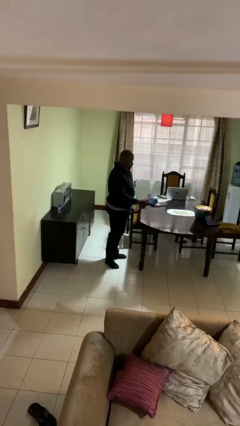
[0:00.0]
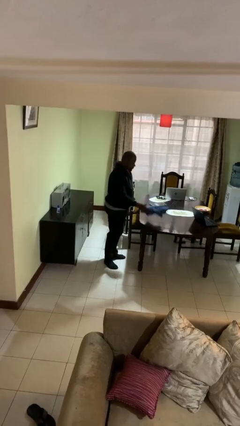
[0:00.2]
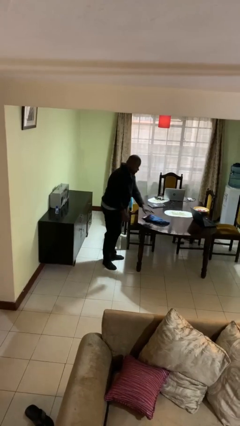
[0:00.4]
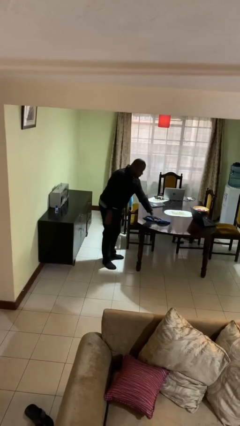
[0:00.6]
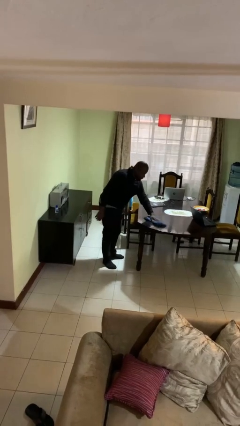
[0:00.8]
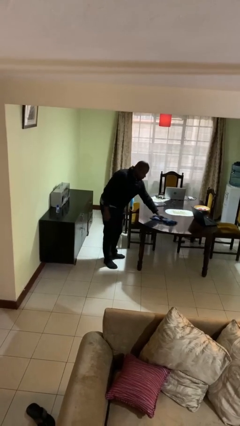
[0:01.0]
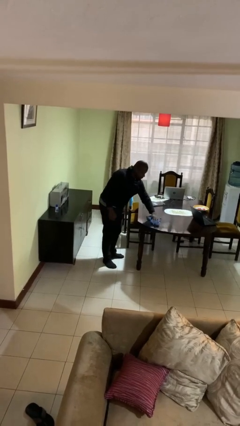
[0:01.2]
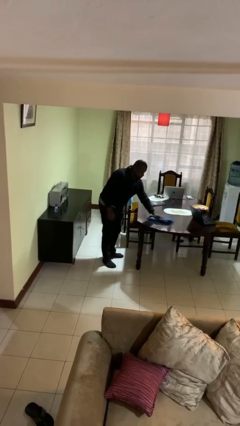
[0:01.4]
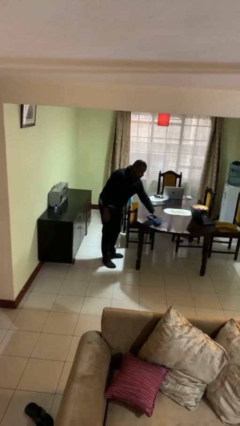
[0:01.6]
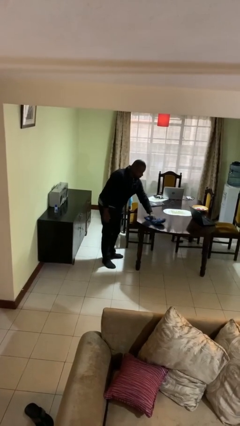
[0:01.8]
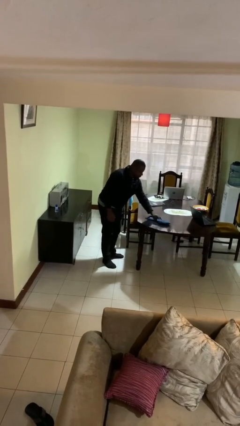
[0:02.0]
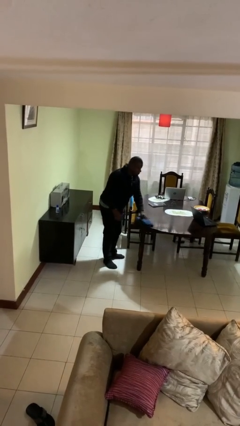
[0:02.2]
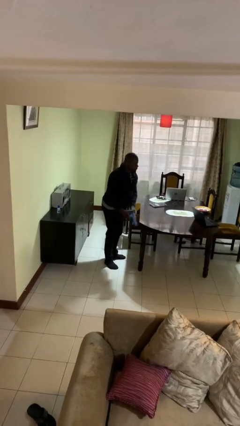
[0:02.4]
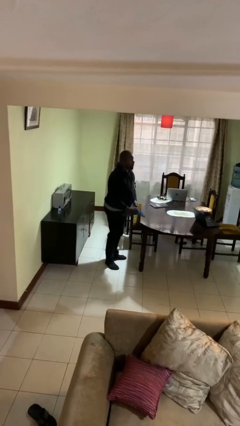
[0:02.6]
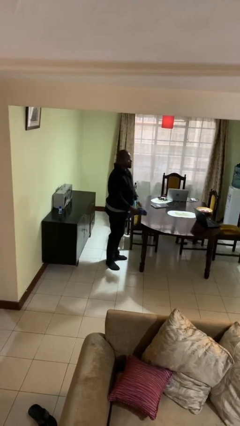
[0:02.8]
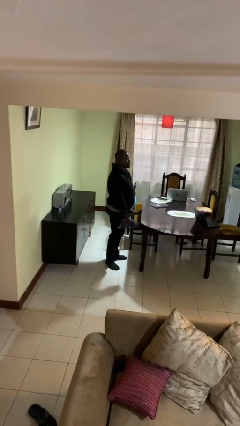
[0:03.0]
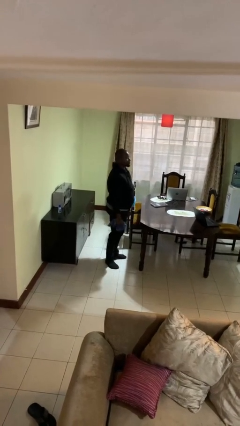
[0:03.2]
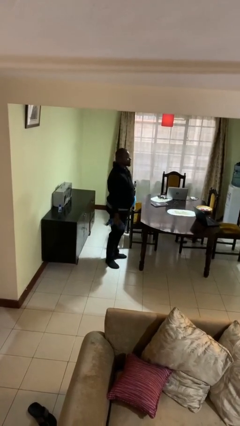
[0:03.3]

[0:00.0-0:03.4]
person cleans table with rag

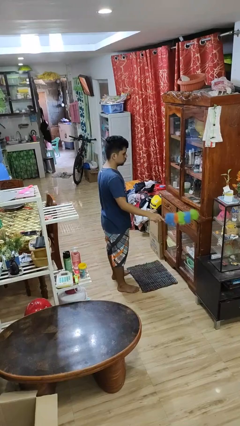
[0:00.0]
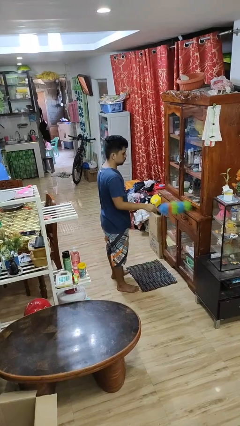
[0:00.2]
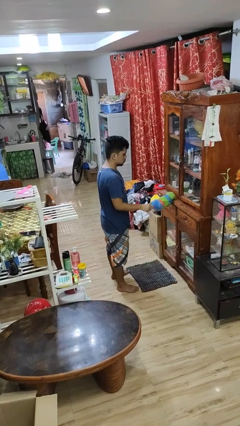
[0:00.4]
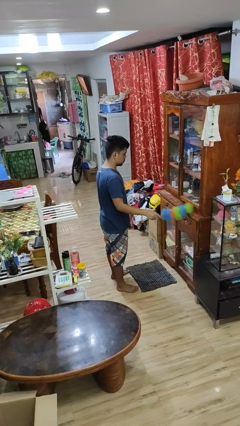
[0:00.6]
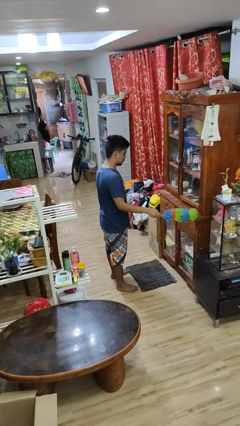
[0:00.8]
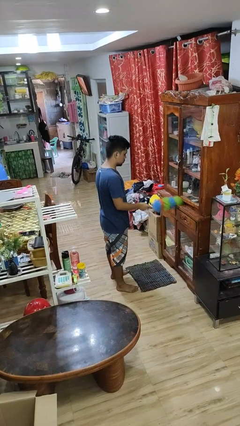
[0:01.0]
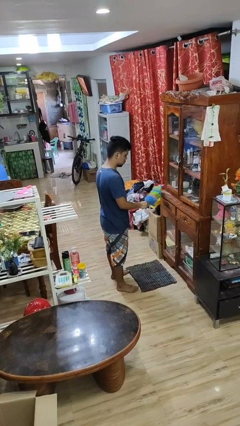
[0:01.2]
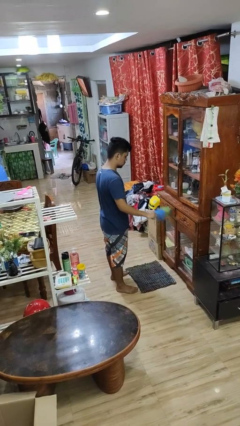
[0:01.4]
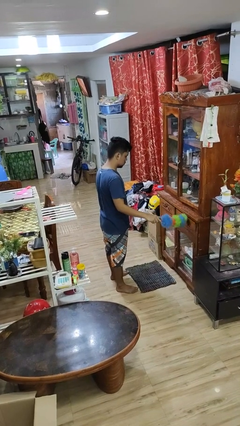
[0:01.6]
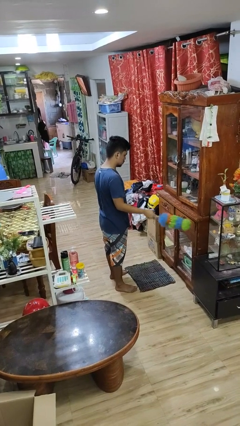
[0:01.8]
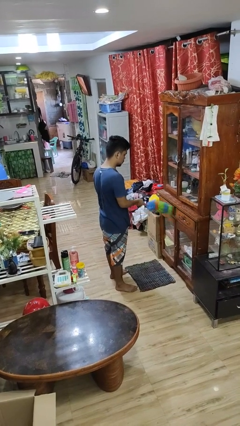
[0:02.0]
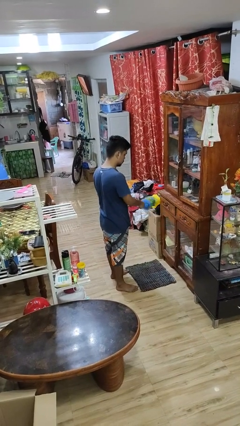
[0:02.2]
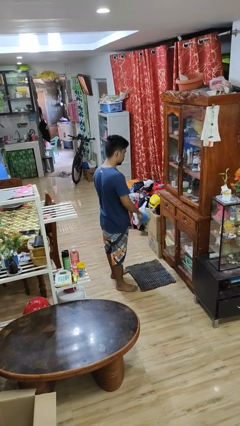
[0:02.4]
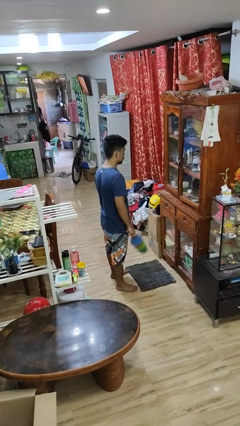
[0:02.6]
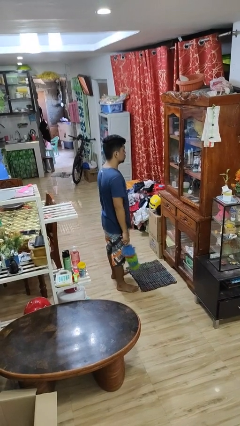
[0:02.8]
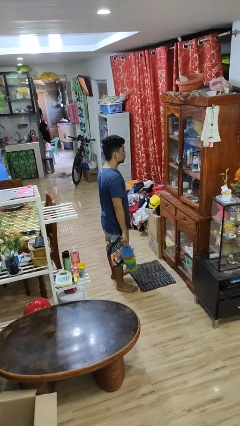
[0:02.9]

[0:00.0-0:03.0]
person dusts furniture

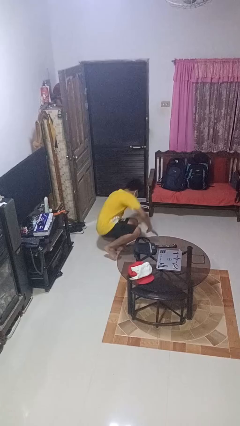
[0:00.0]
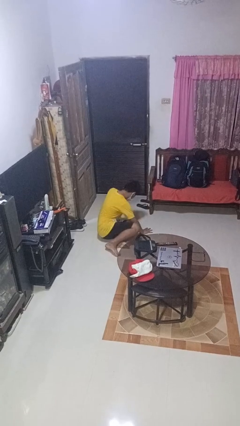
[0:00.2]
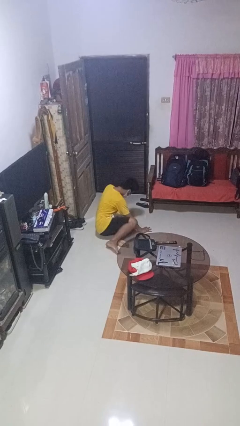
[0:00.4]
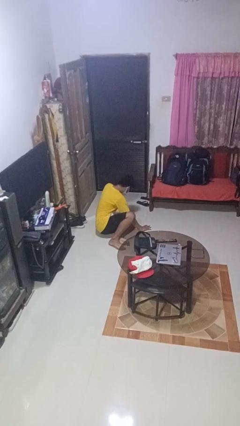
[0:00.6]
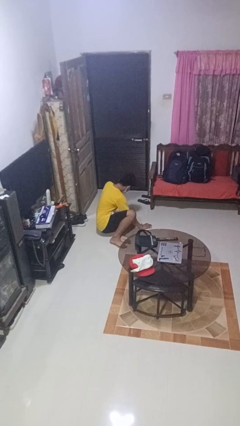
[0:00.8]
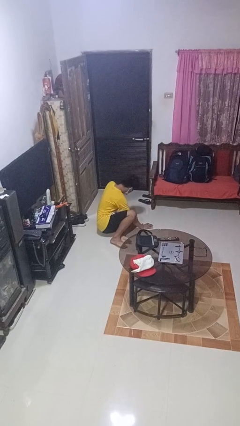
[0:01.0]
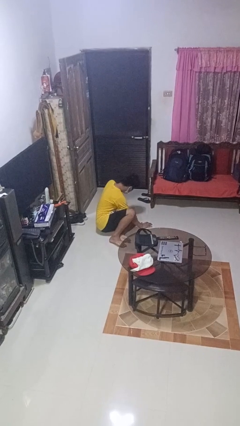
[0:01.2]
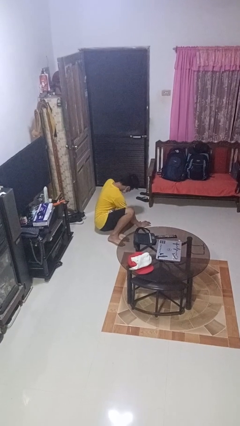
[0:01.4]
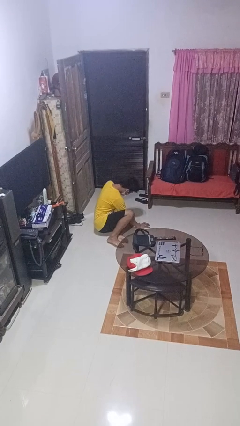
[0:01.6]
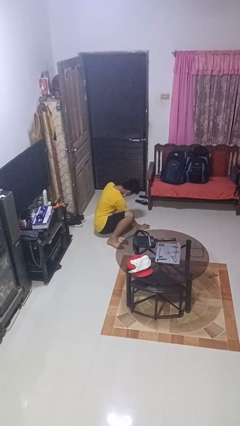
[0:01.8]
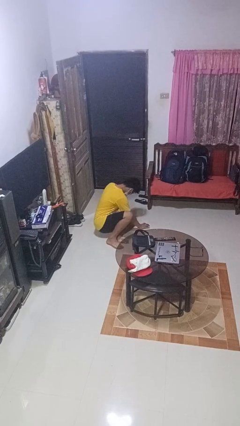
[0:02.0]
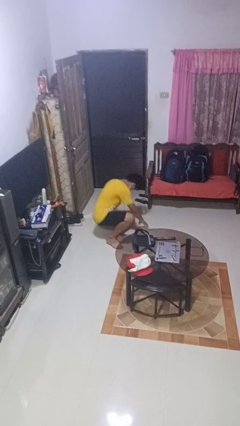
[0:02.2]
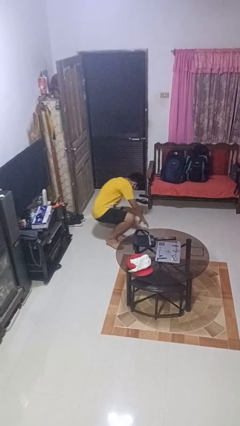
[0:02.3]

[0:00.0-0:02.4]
person lies down on floor

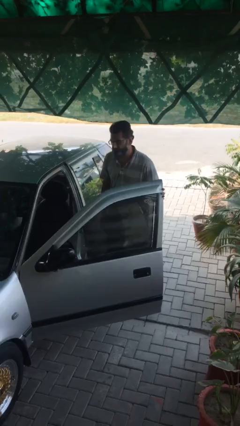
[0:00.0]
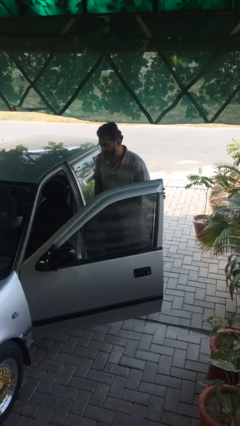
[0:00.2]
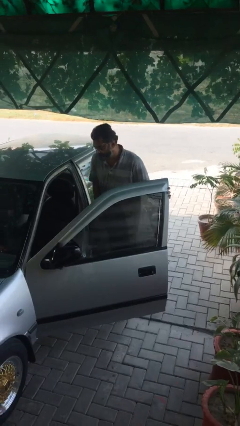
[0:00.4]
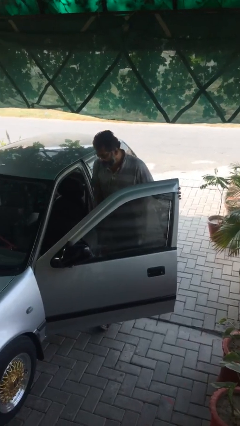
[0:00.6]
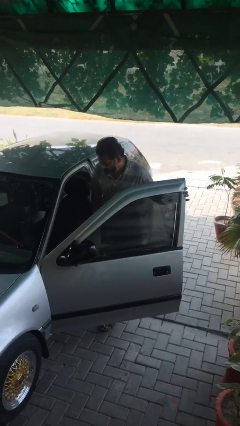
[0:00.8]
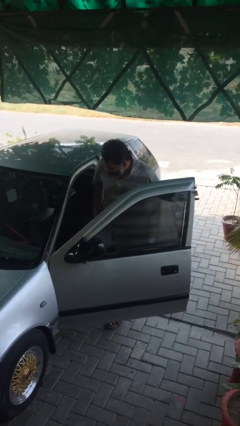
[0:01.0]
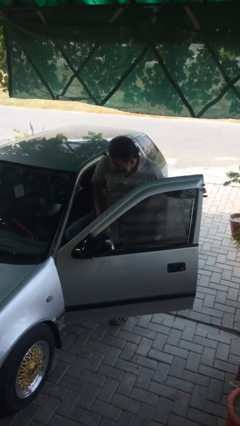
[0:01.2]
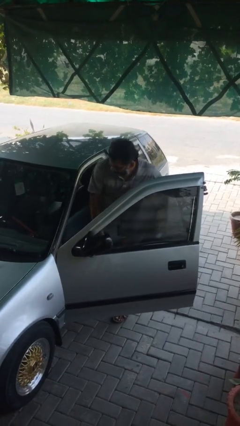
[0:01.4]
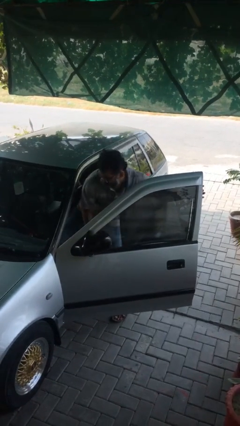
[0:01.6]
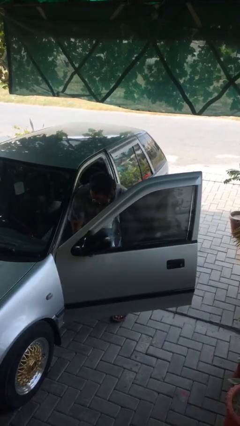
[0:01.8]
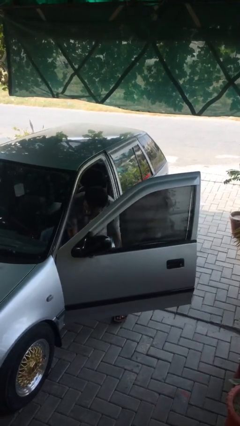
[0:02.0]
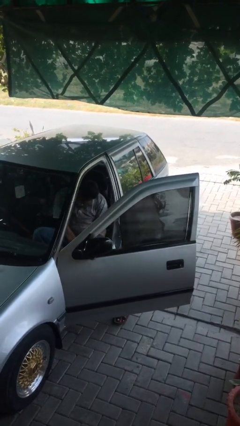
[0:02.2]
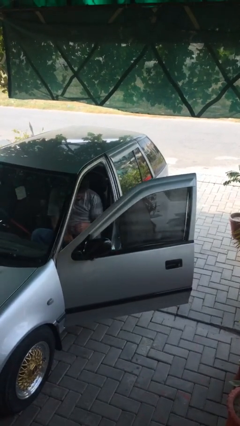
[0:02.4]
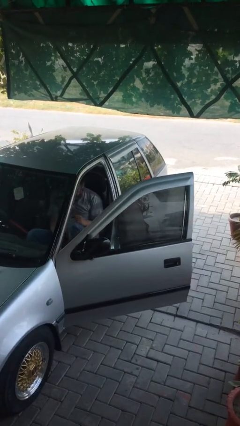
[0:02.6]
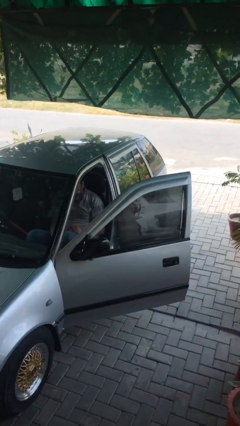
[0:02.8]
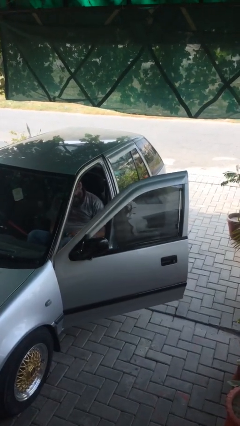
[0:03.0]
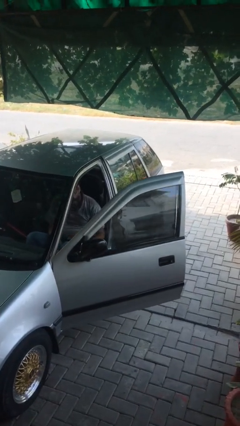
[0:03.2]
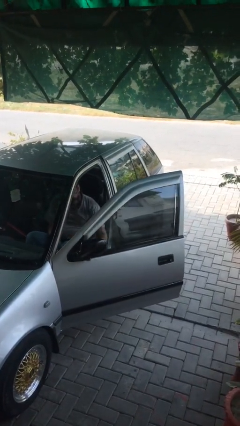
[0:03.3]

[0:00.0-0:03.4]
person enters car

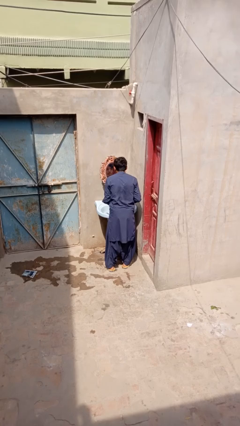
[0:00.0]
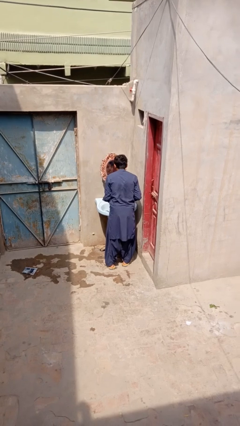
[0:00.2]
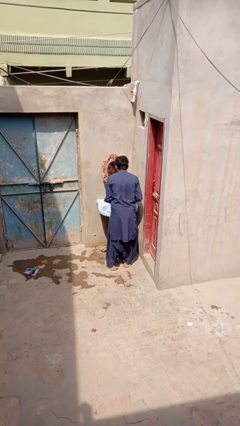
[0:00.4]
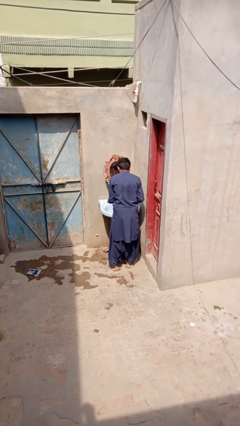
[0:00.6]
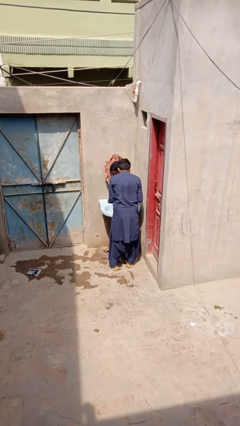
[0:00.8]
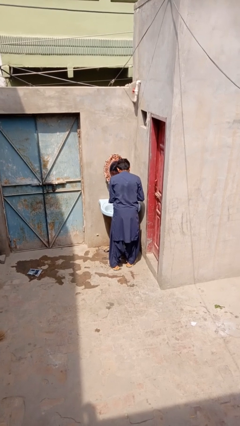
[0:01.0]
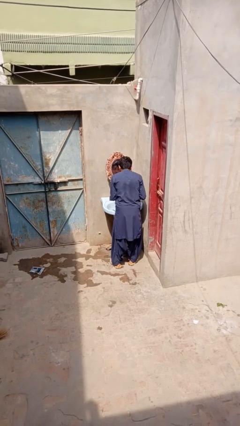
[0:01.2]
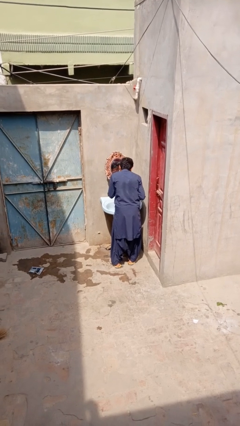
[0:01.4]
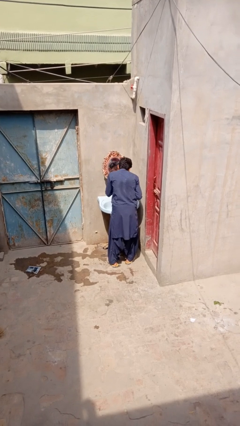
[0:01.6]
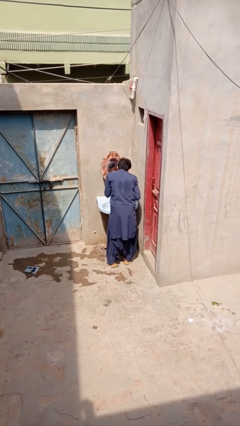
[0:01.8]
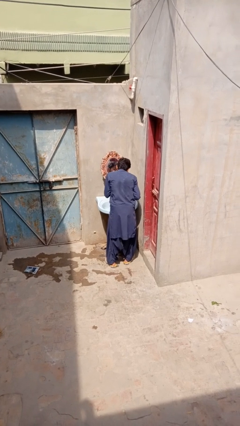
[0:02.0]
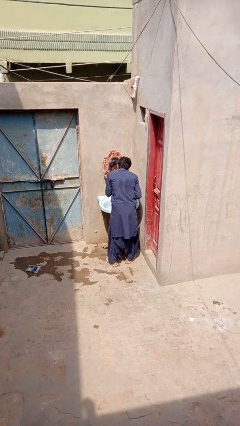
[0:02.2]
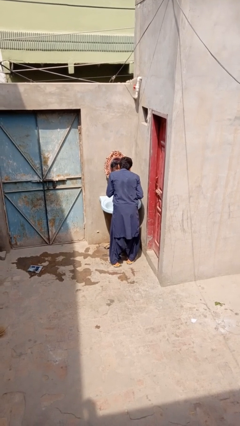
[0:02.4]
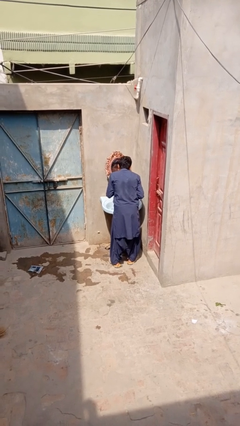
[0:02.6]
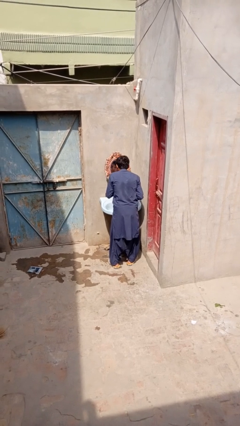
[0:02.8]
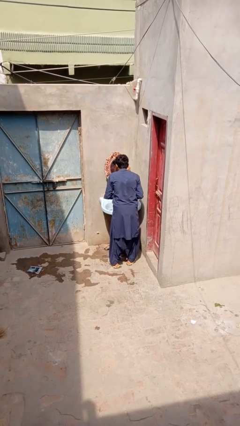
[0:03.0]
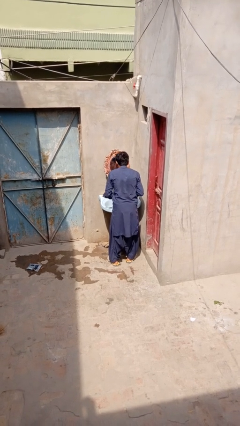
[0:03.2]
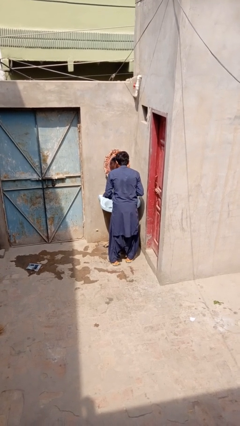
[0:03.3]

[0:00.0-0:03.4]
person applies shaving cream

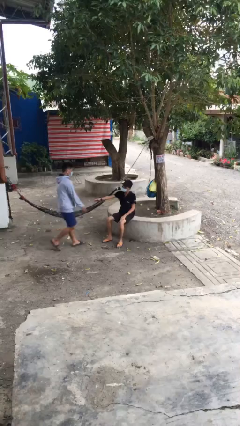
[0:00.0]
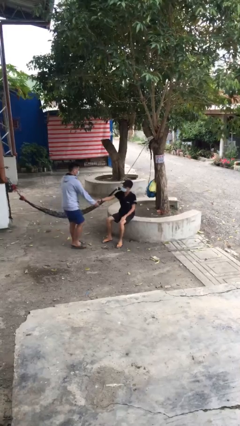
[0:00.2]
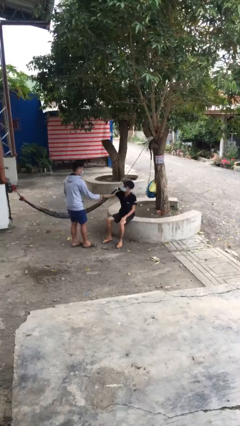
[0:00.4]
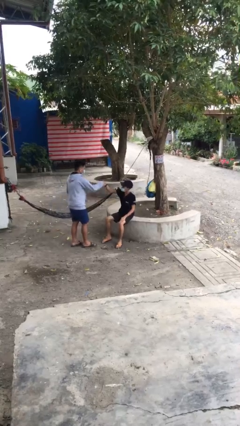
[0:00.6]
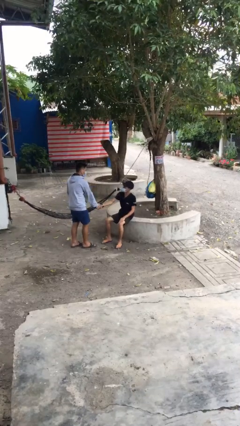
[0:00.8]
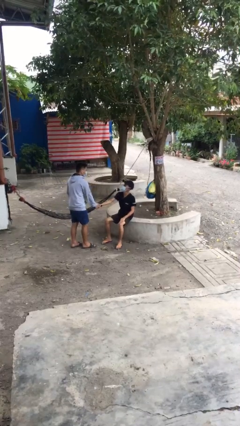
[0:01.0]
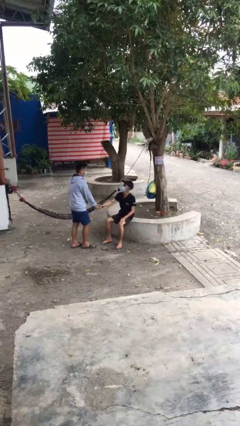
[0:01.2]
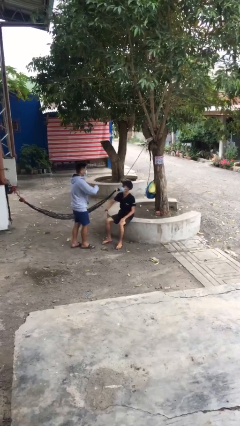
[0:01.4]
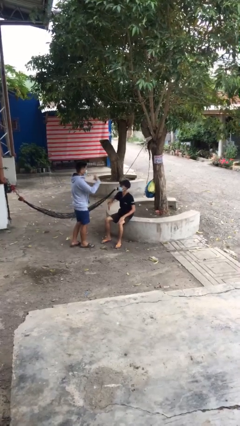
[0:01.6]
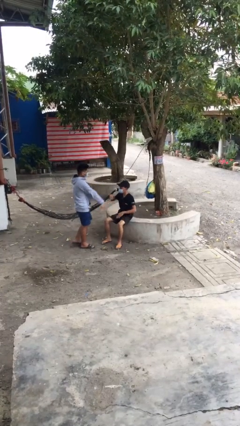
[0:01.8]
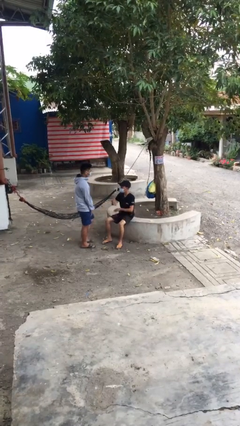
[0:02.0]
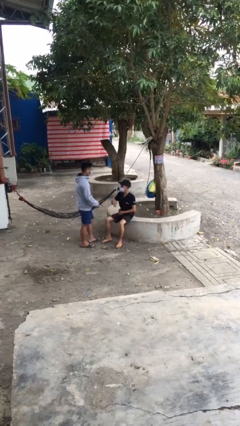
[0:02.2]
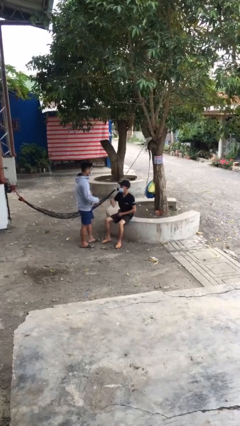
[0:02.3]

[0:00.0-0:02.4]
person shakes hand
